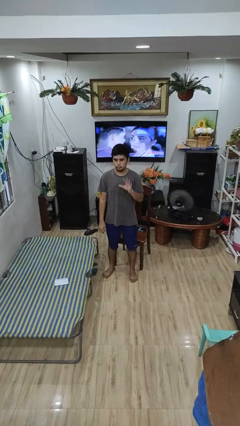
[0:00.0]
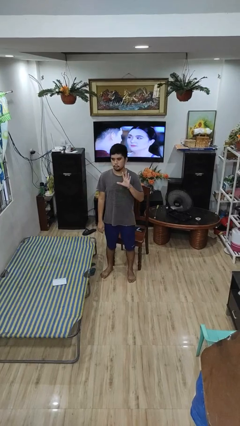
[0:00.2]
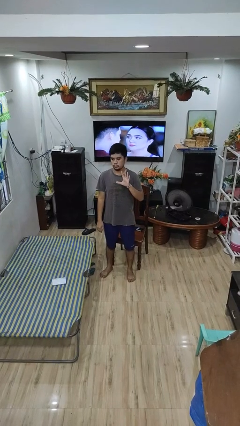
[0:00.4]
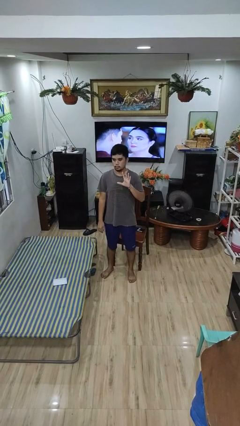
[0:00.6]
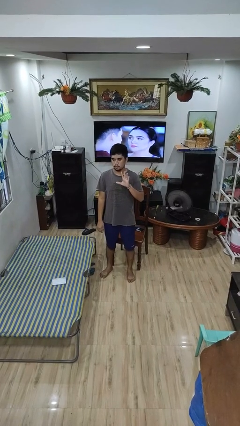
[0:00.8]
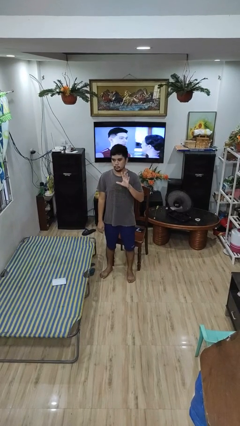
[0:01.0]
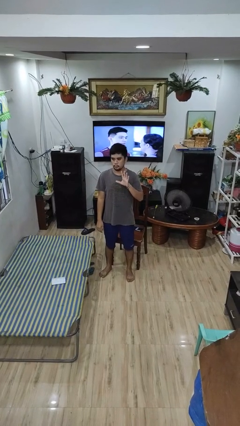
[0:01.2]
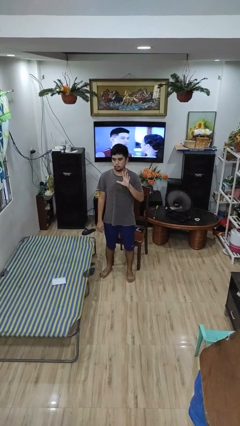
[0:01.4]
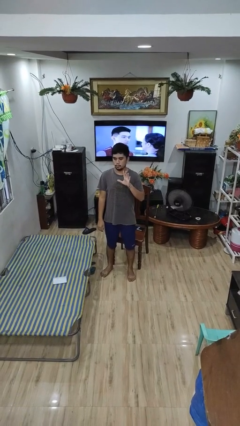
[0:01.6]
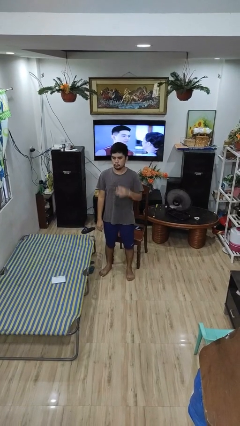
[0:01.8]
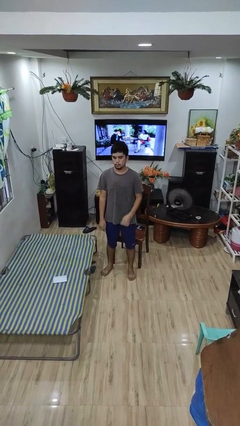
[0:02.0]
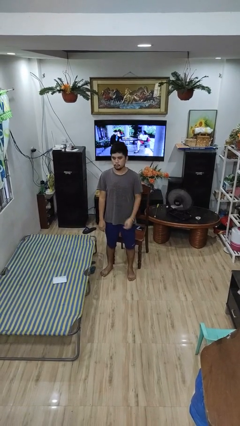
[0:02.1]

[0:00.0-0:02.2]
person gestures number five

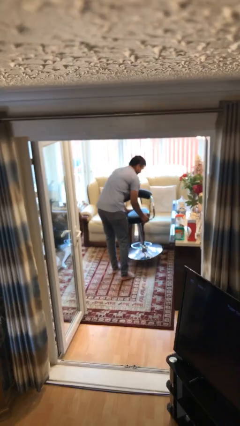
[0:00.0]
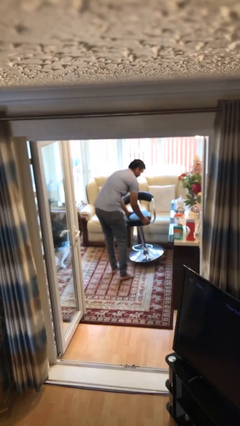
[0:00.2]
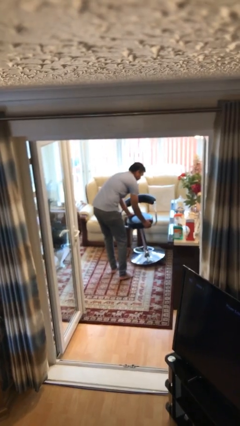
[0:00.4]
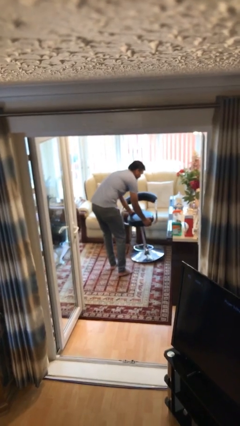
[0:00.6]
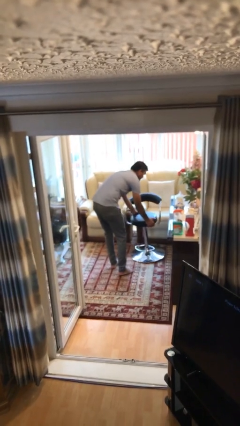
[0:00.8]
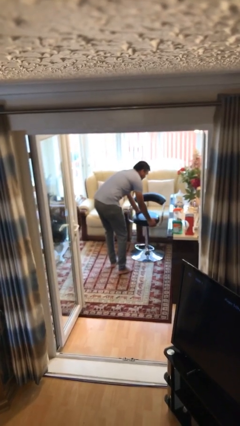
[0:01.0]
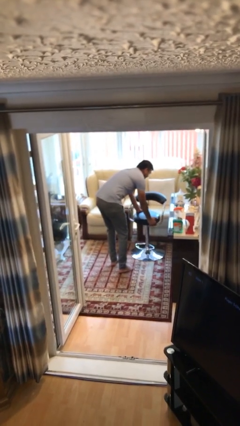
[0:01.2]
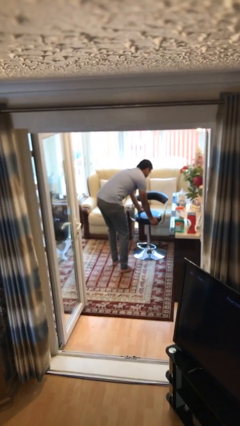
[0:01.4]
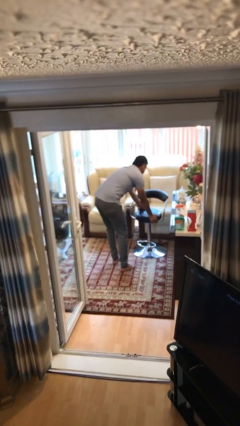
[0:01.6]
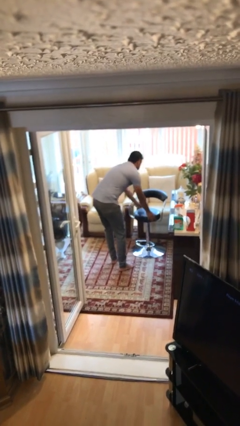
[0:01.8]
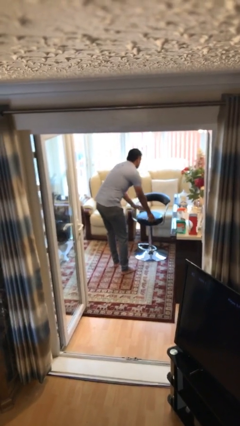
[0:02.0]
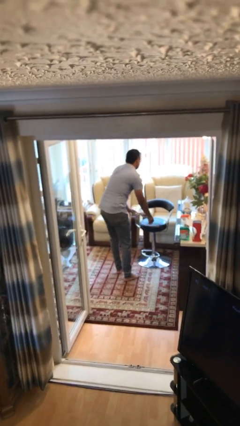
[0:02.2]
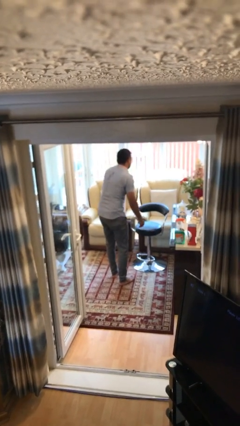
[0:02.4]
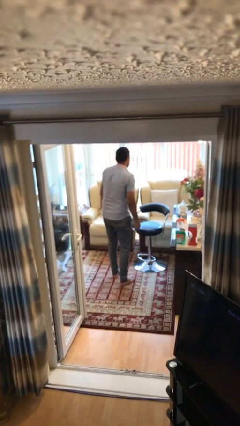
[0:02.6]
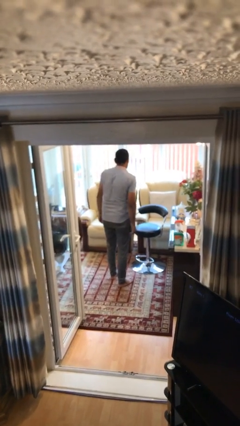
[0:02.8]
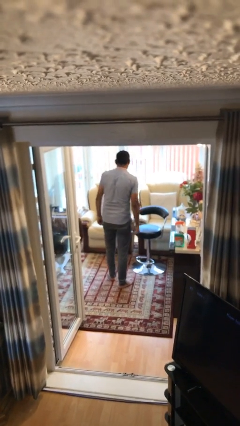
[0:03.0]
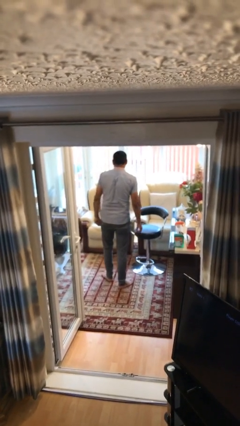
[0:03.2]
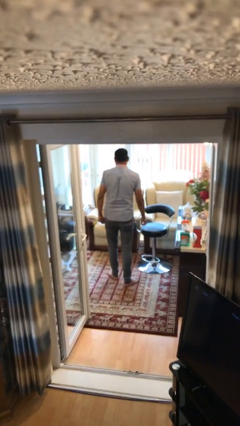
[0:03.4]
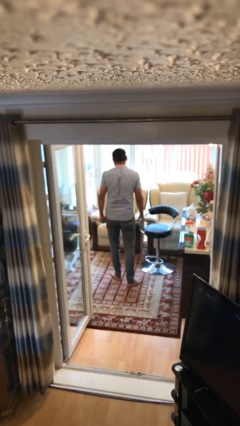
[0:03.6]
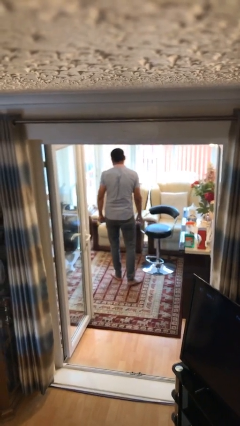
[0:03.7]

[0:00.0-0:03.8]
person puts down object on floor

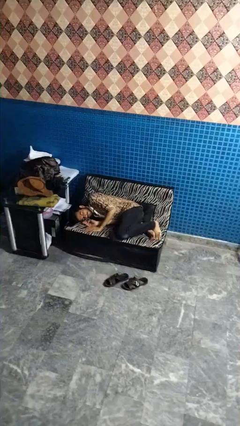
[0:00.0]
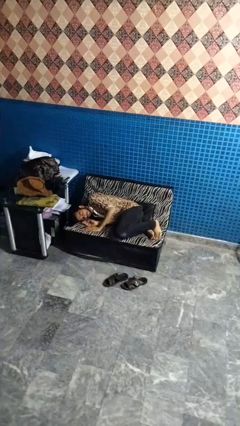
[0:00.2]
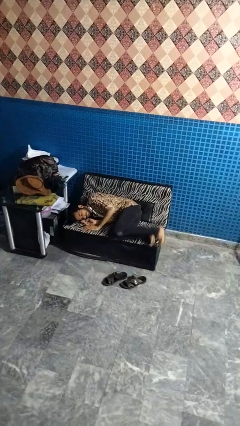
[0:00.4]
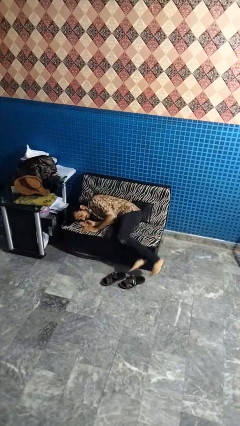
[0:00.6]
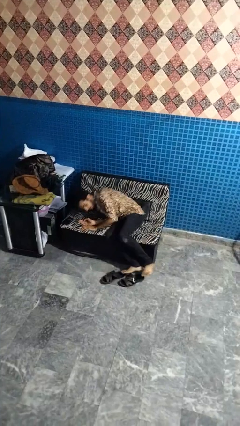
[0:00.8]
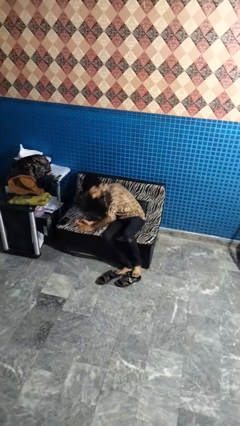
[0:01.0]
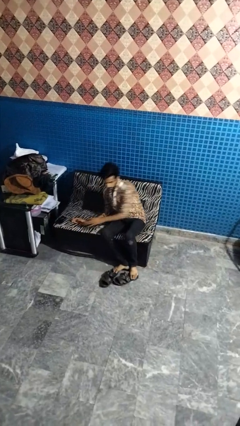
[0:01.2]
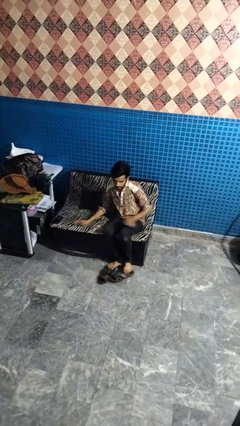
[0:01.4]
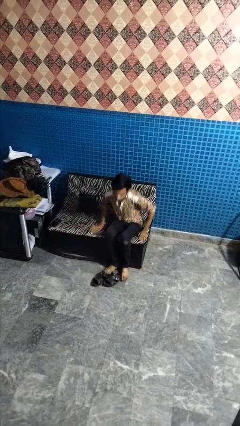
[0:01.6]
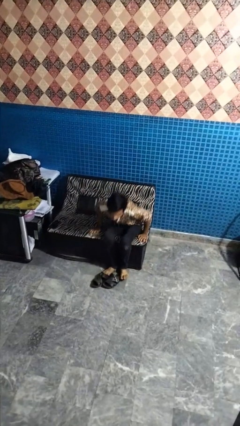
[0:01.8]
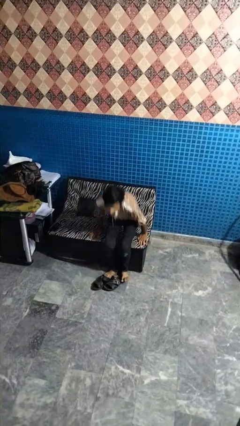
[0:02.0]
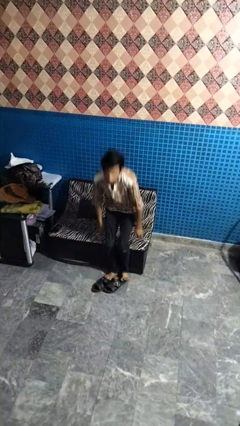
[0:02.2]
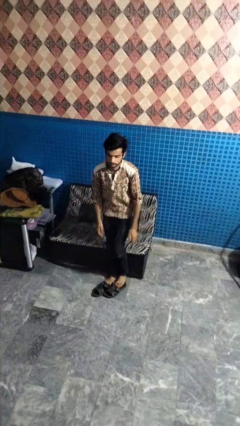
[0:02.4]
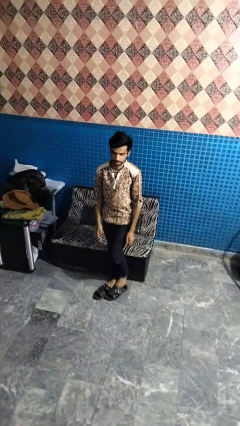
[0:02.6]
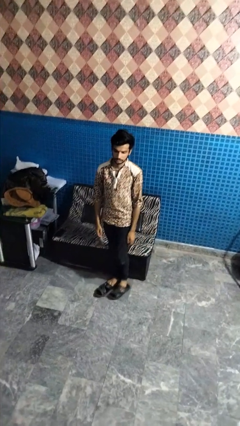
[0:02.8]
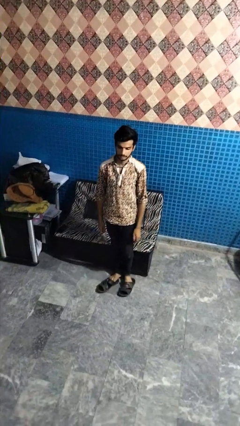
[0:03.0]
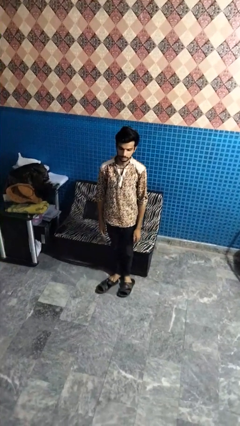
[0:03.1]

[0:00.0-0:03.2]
person stands up

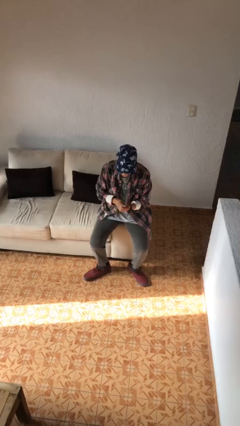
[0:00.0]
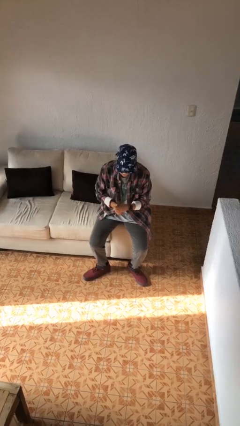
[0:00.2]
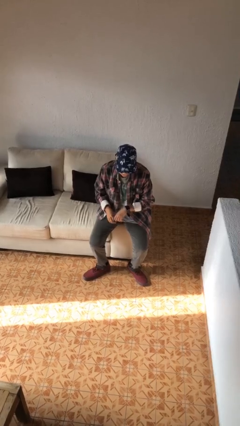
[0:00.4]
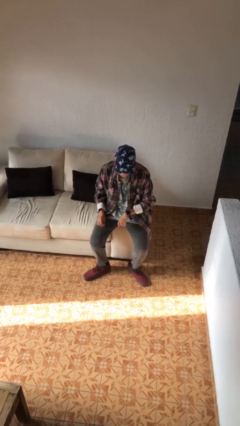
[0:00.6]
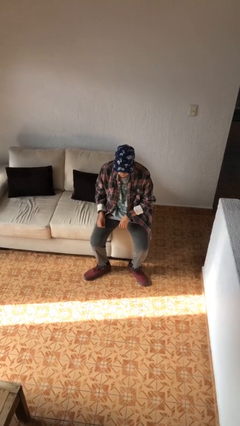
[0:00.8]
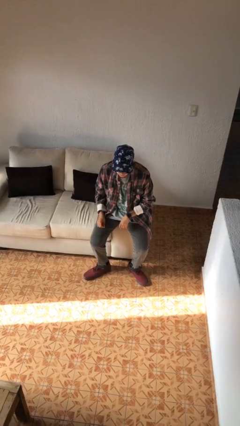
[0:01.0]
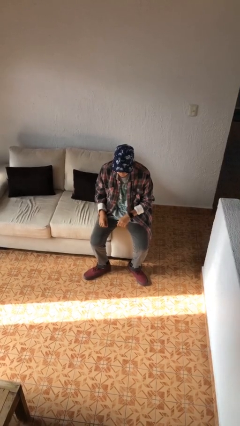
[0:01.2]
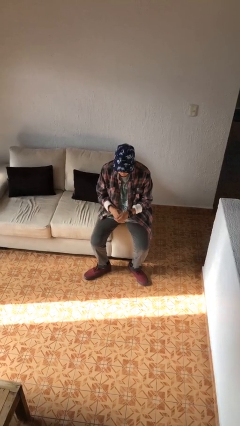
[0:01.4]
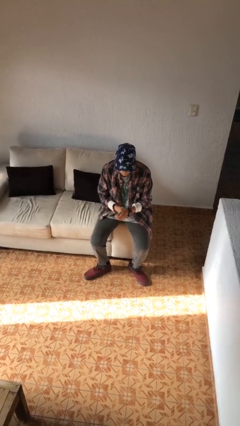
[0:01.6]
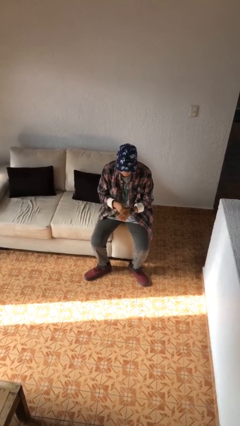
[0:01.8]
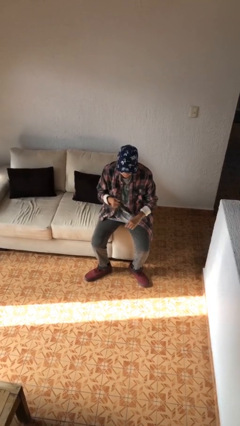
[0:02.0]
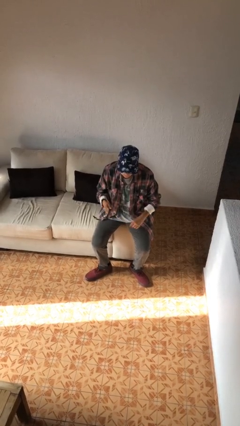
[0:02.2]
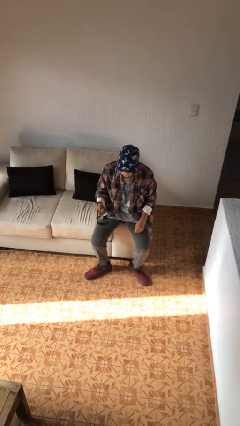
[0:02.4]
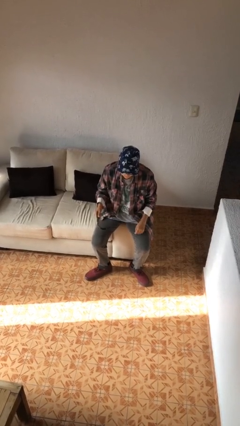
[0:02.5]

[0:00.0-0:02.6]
person takes off wristwatch

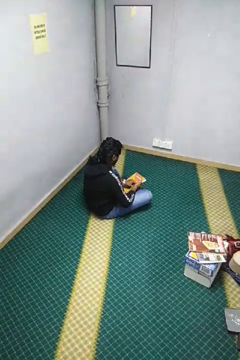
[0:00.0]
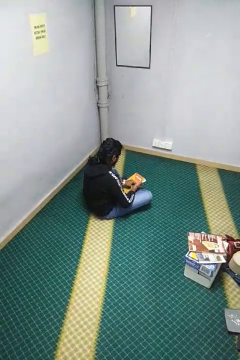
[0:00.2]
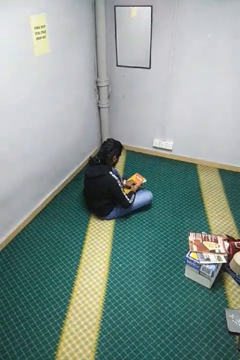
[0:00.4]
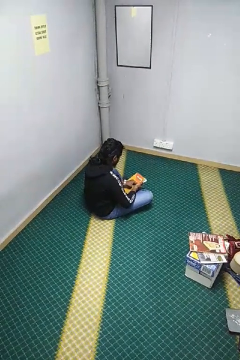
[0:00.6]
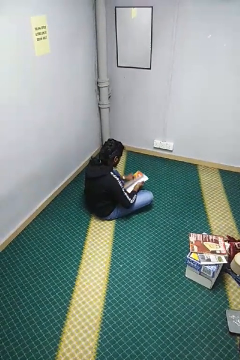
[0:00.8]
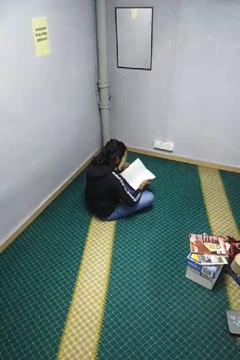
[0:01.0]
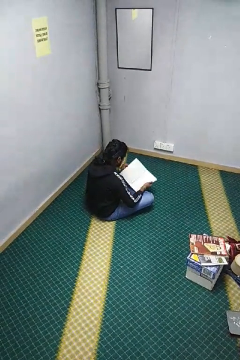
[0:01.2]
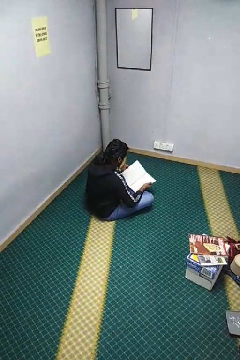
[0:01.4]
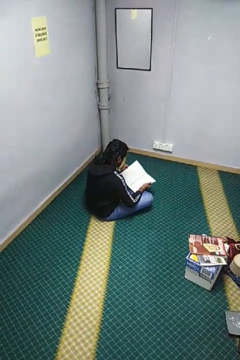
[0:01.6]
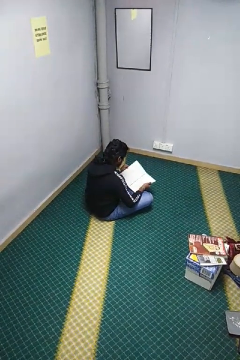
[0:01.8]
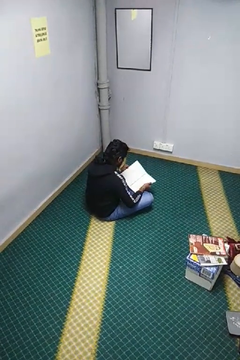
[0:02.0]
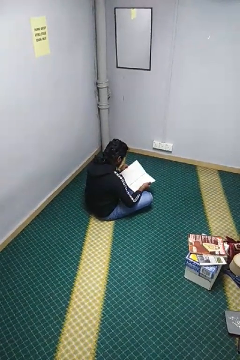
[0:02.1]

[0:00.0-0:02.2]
person reads book

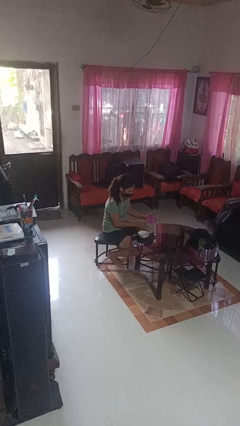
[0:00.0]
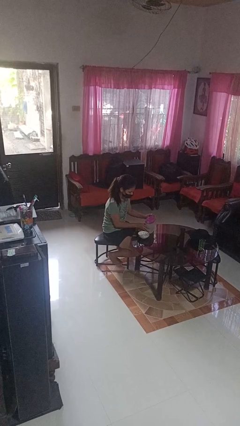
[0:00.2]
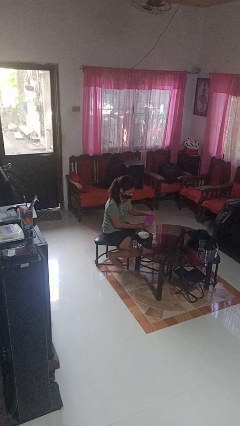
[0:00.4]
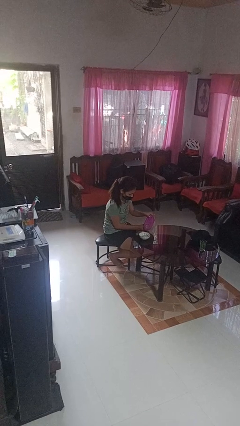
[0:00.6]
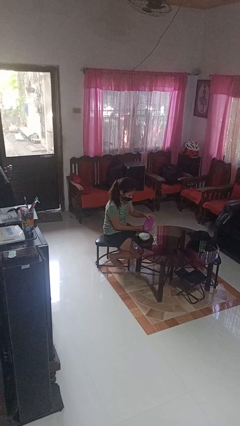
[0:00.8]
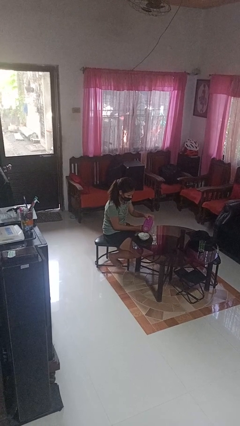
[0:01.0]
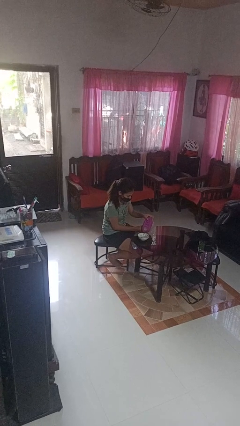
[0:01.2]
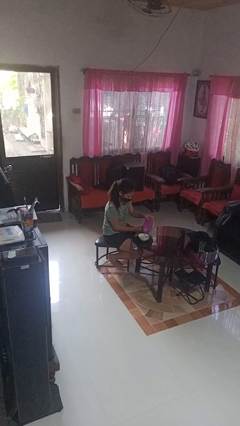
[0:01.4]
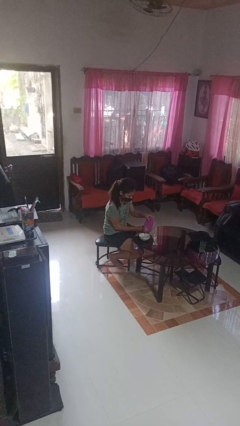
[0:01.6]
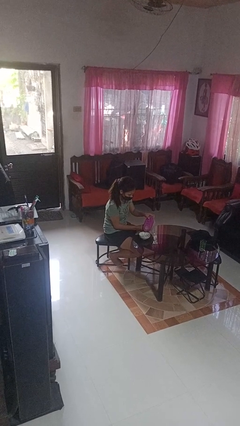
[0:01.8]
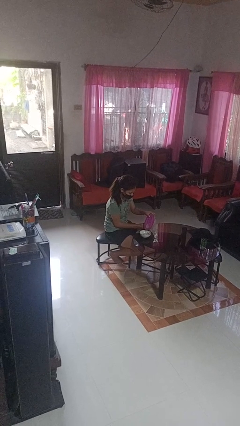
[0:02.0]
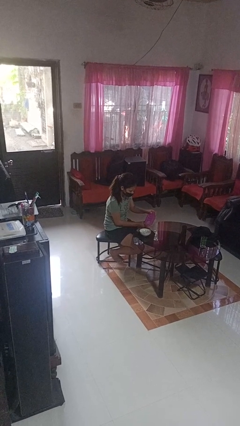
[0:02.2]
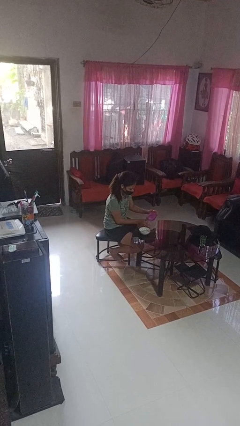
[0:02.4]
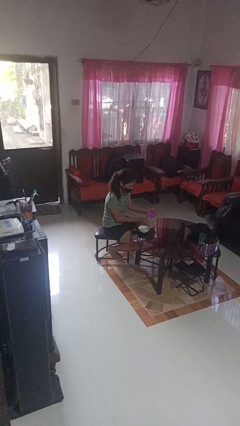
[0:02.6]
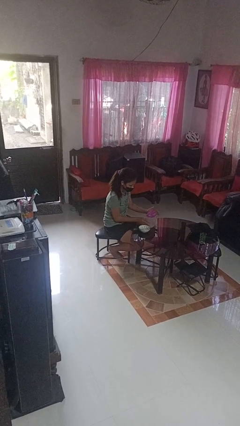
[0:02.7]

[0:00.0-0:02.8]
person pours into bowl

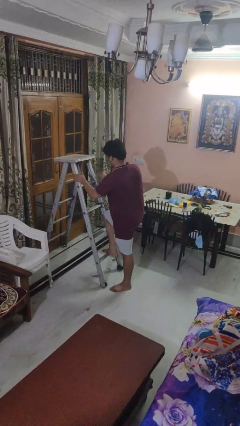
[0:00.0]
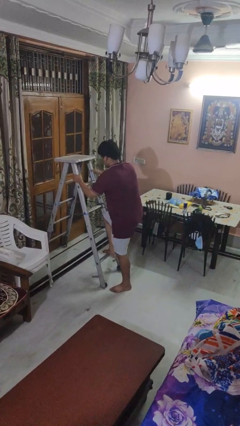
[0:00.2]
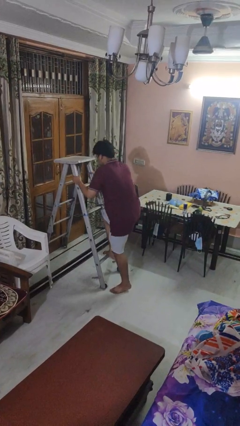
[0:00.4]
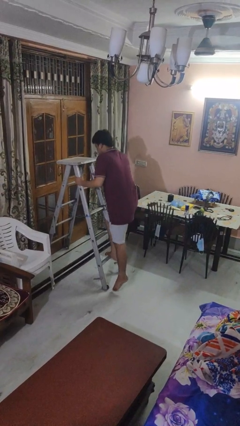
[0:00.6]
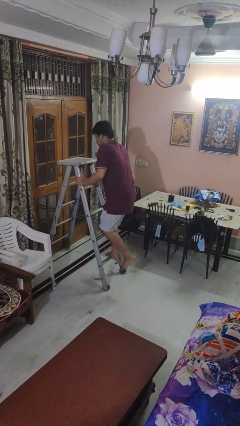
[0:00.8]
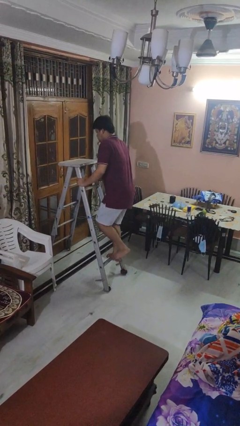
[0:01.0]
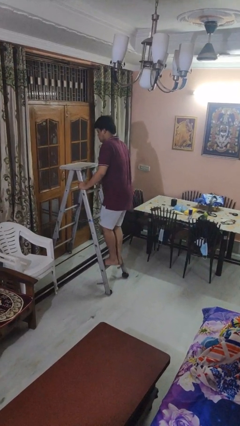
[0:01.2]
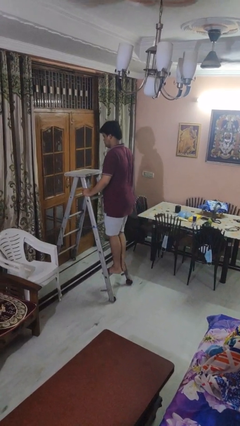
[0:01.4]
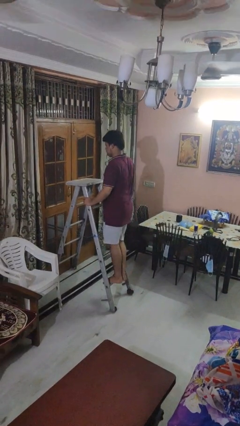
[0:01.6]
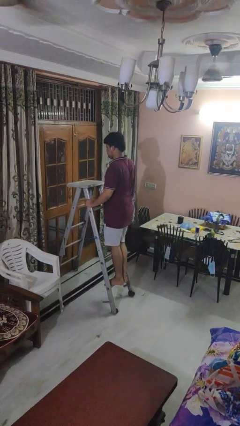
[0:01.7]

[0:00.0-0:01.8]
person climbs up ladder
